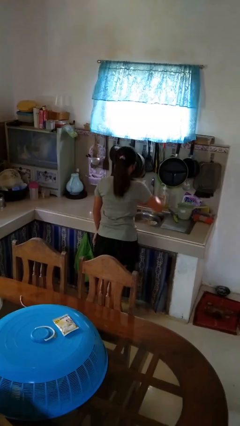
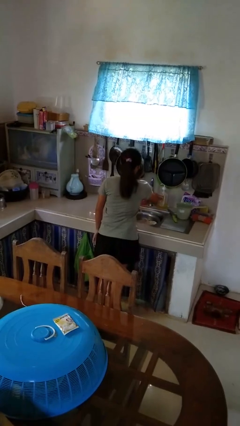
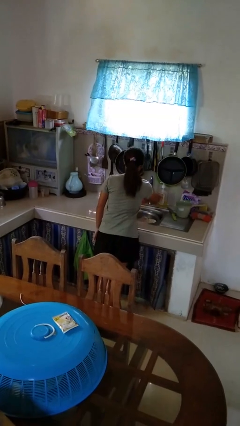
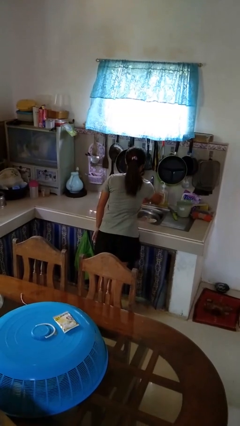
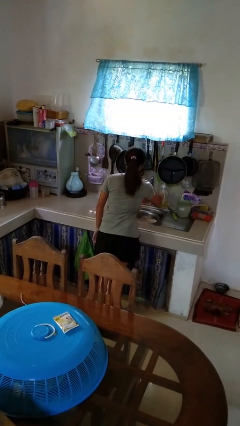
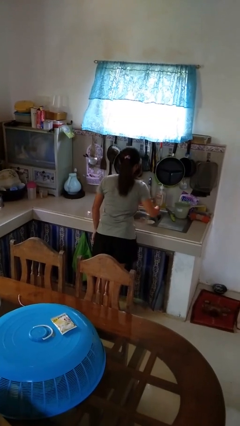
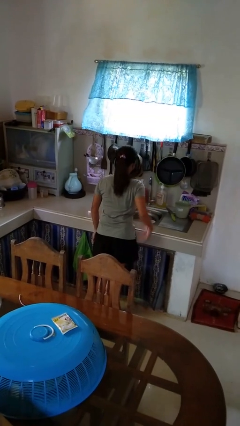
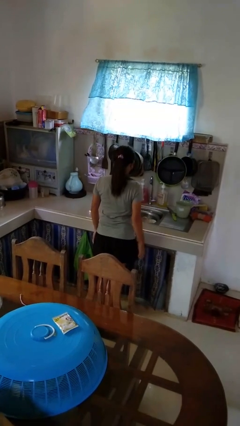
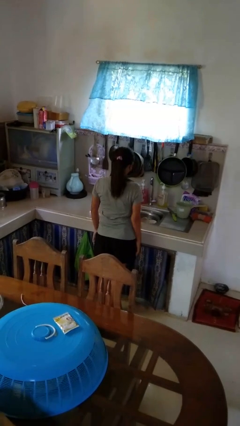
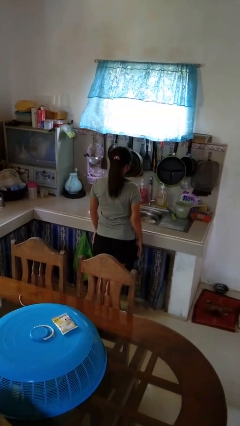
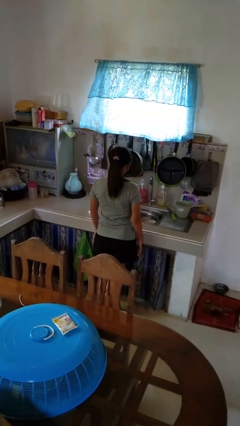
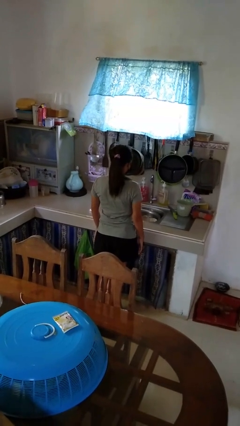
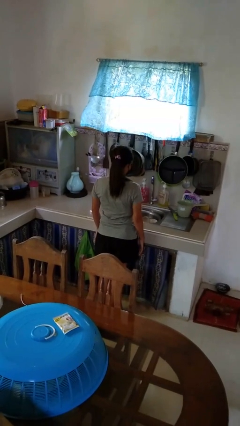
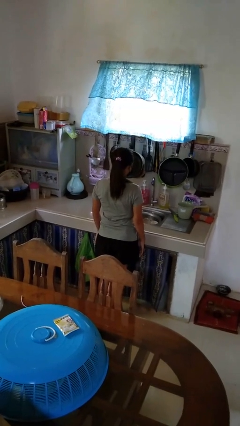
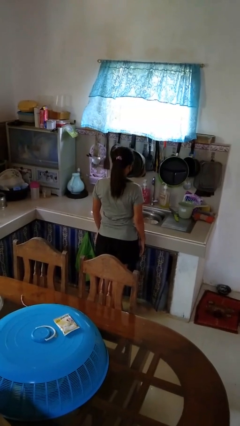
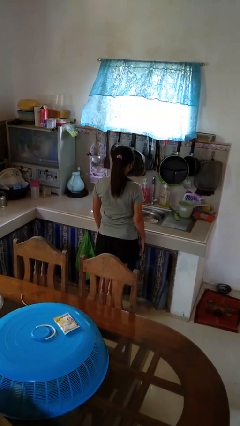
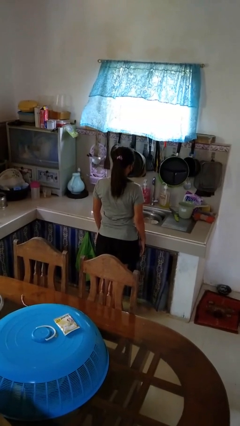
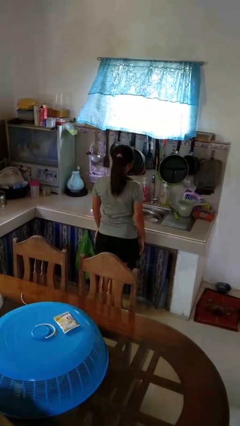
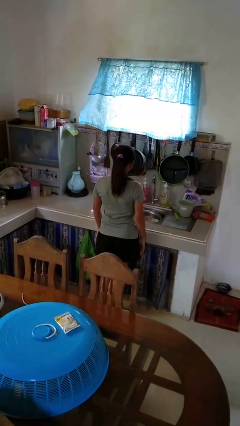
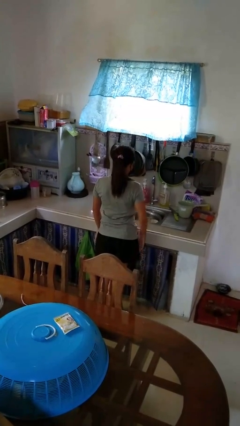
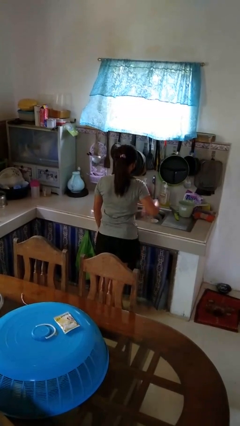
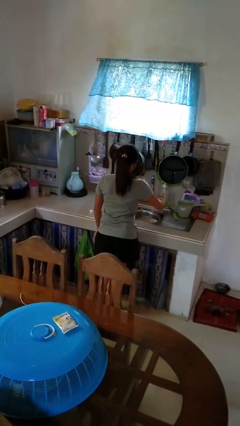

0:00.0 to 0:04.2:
person turns on faucet

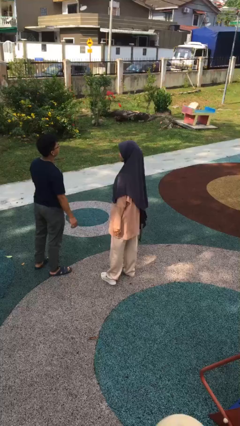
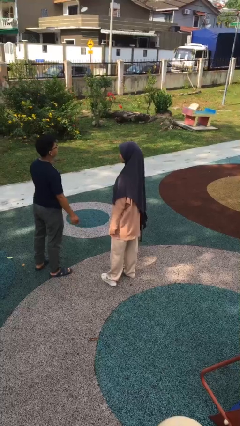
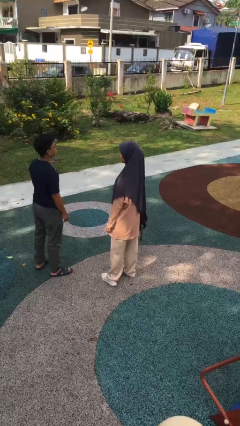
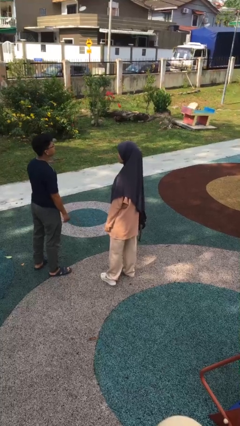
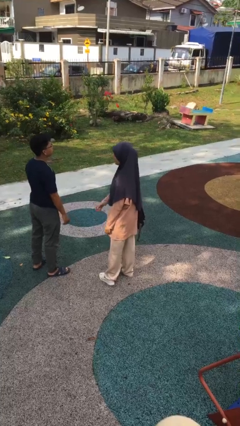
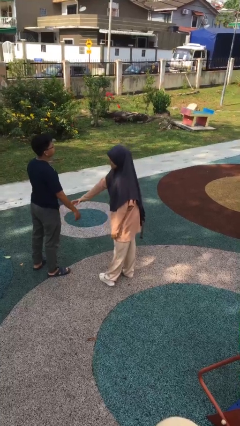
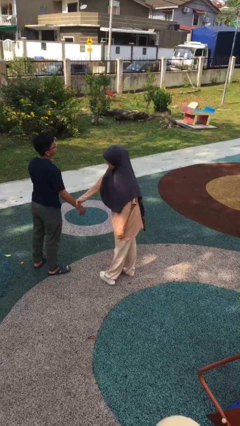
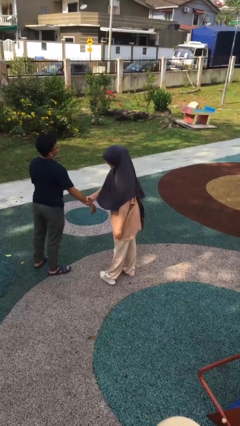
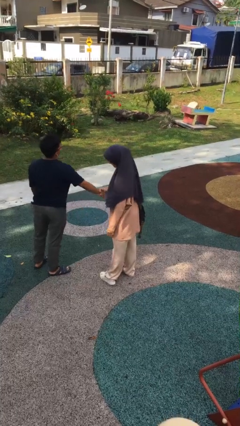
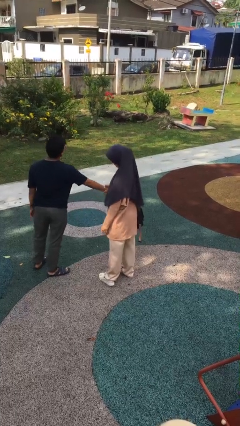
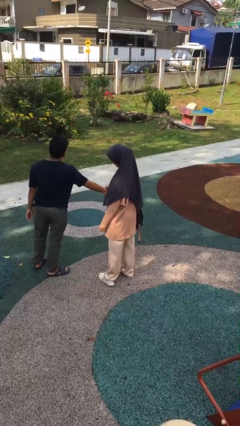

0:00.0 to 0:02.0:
person grabs person by forearm

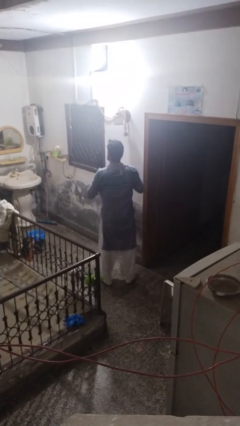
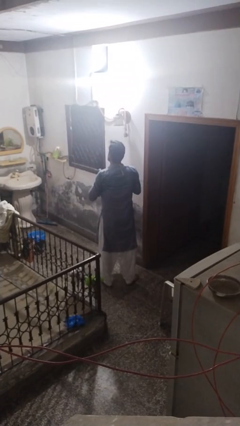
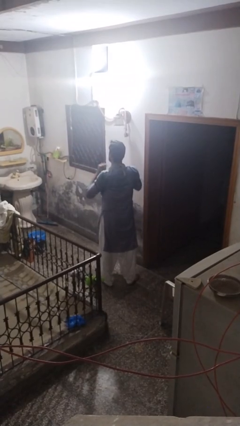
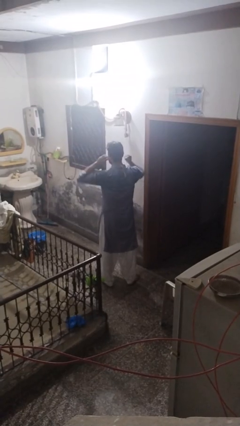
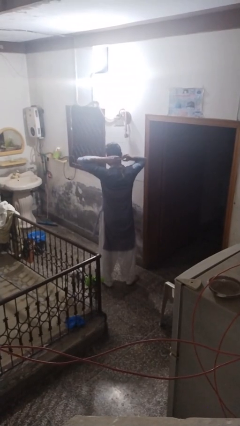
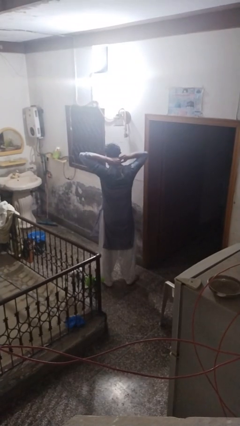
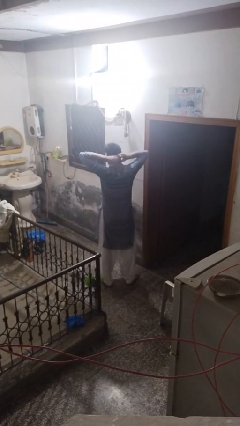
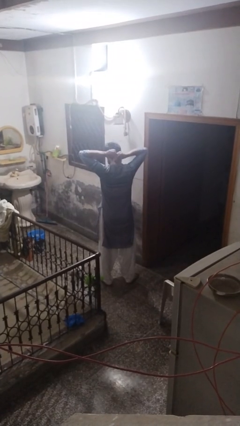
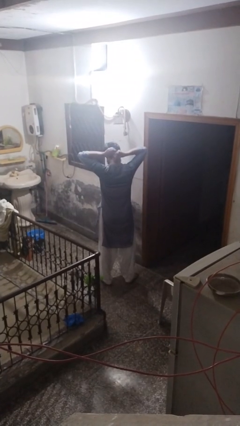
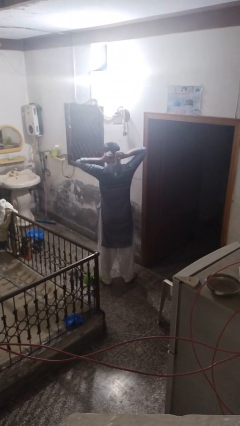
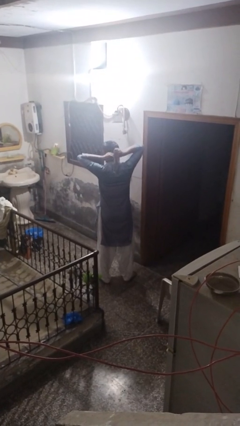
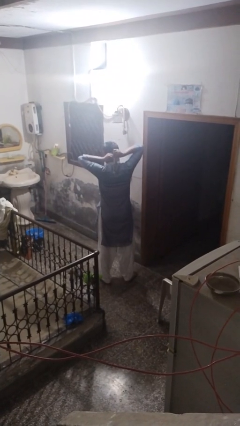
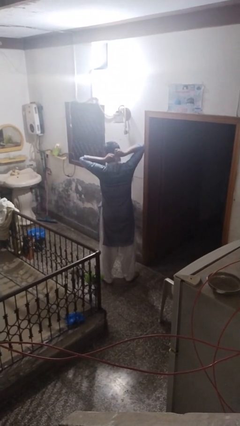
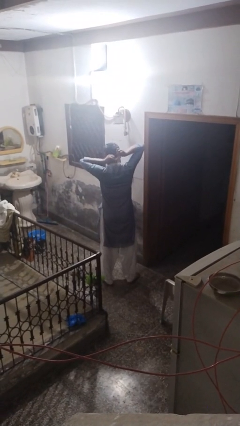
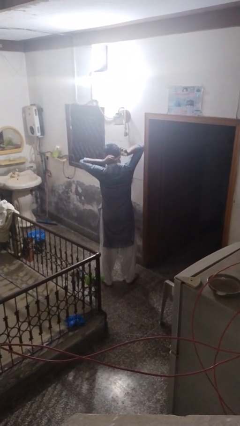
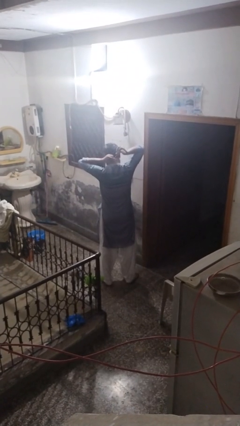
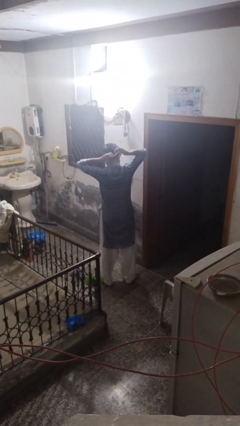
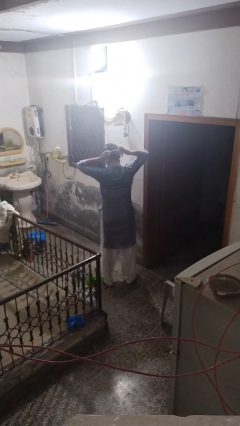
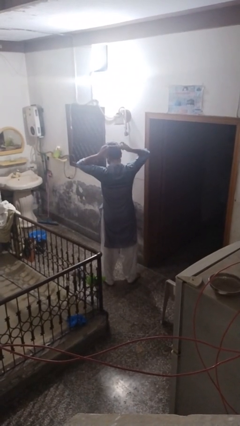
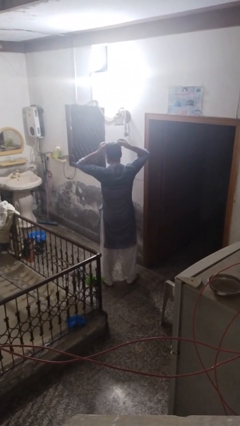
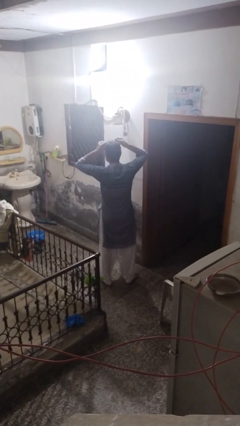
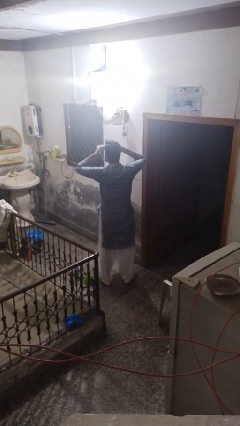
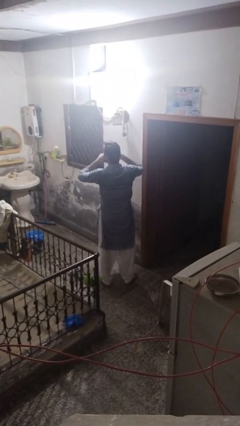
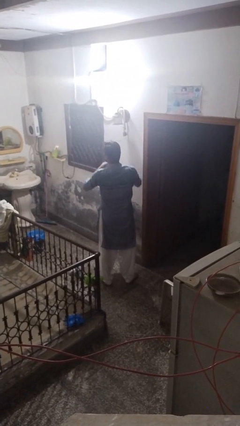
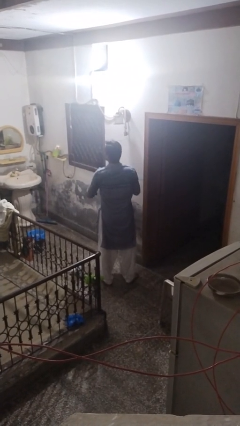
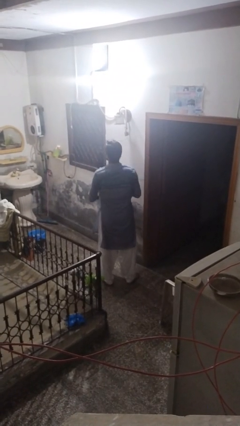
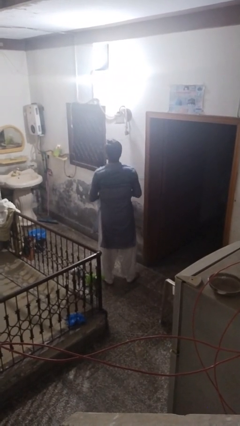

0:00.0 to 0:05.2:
person takes off necklace

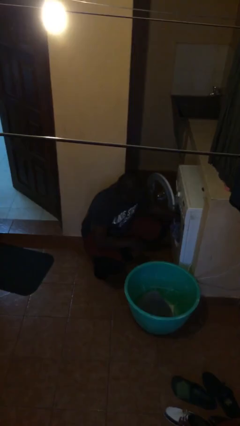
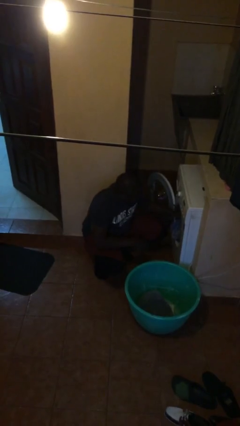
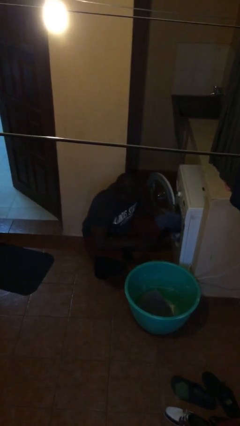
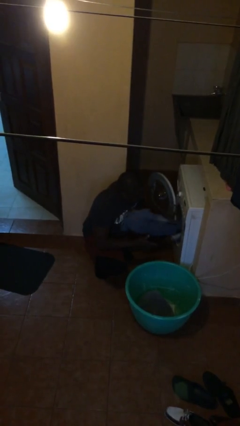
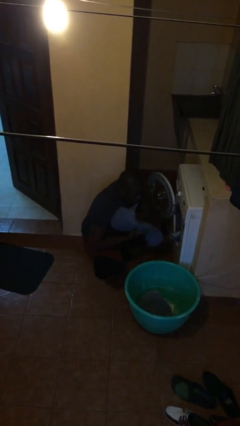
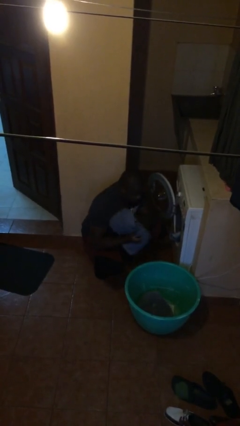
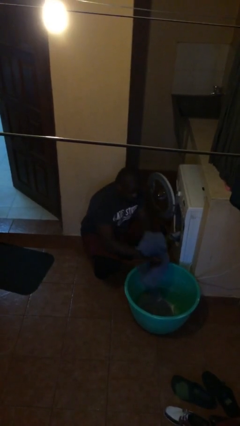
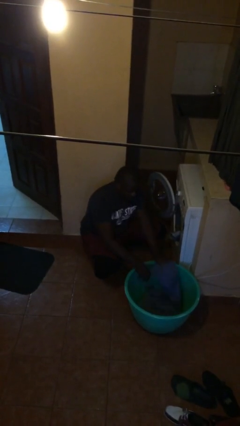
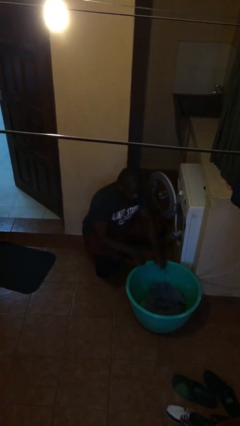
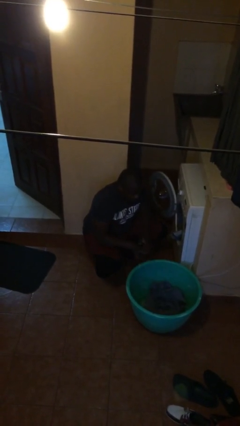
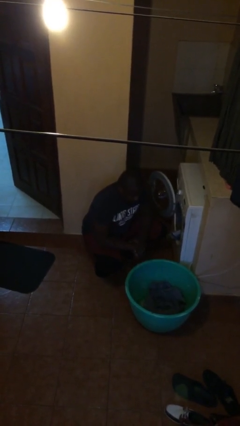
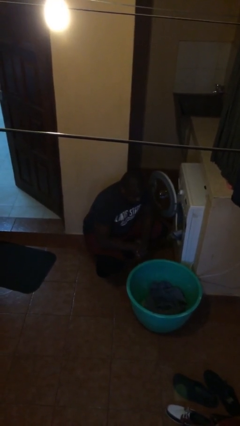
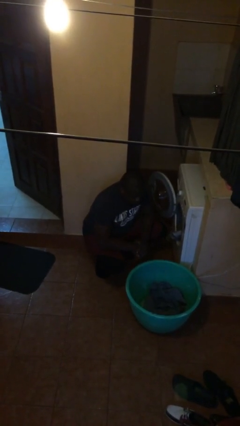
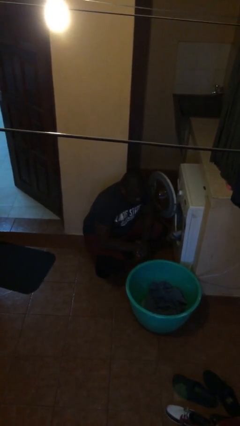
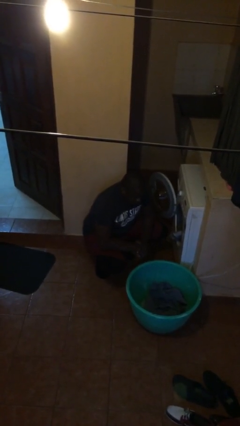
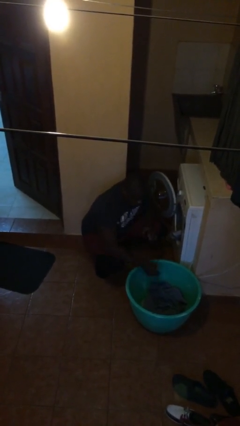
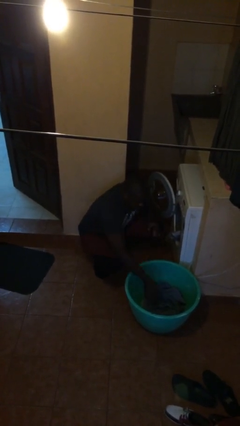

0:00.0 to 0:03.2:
person unloads clotheswasher

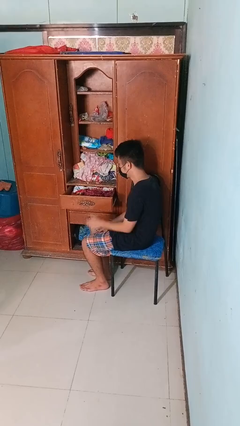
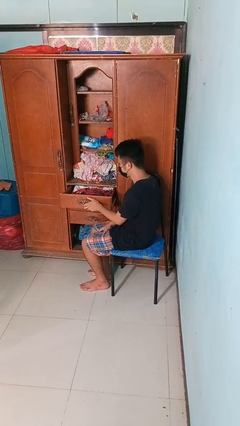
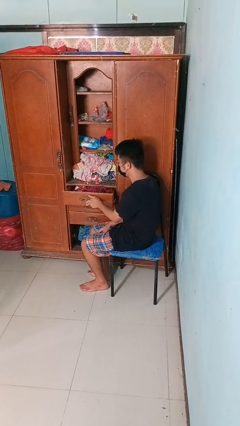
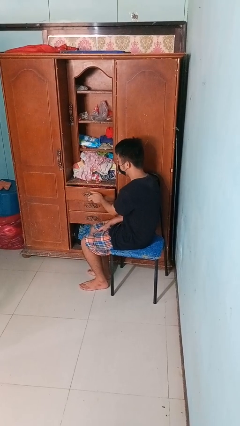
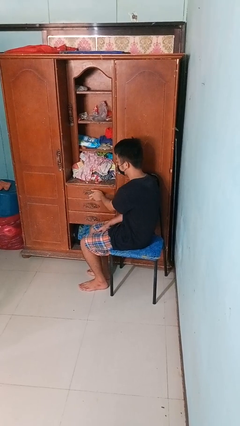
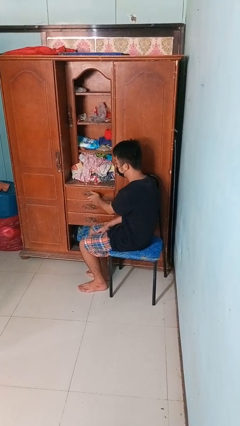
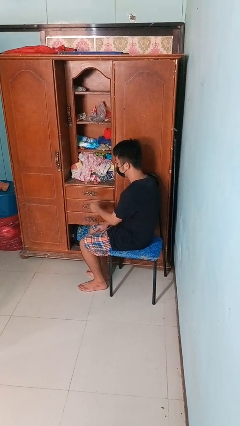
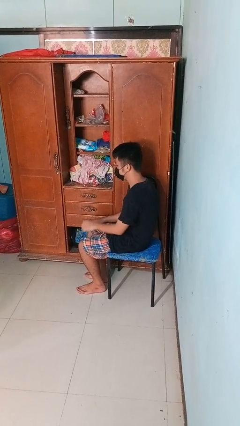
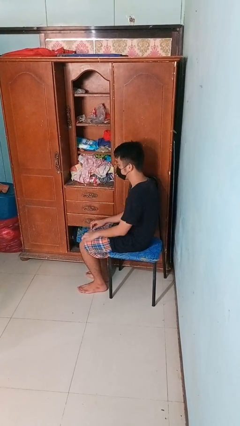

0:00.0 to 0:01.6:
person closes dresser drawer

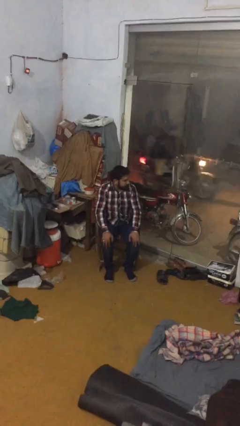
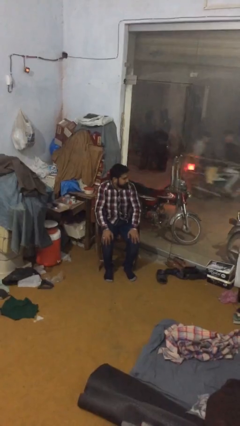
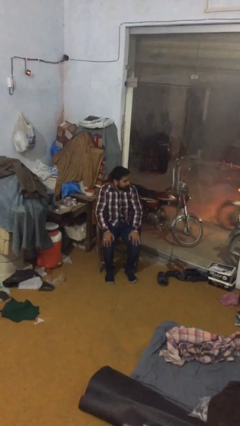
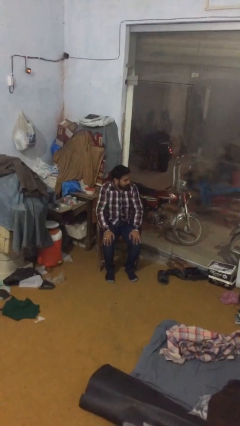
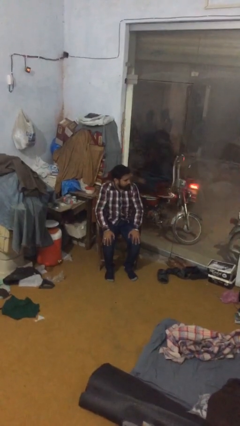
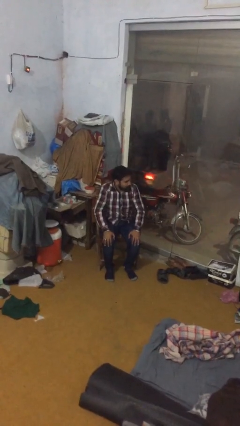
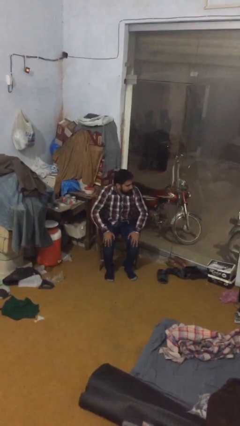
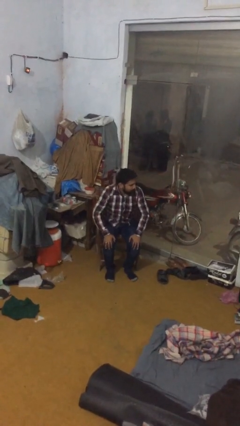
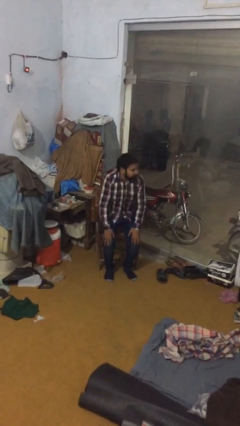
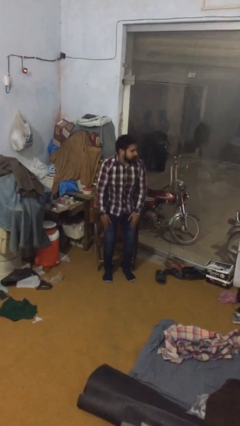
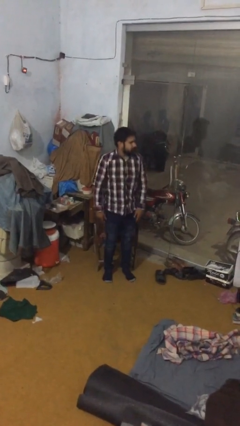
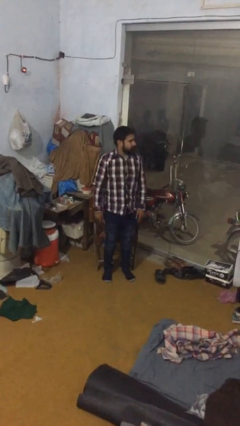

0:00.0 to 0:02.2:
person stands up
